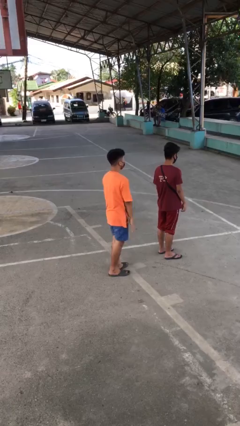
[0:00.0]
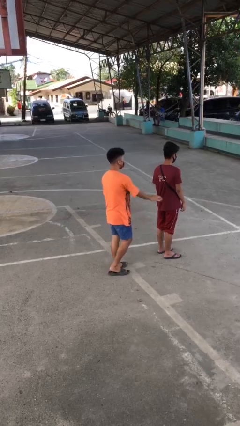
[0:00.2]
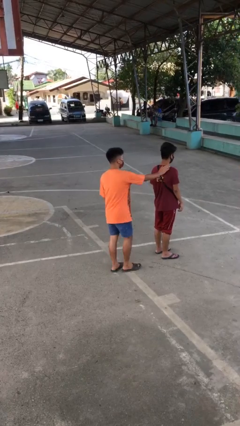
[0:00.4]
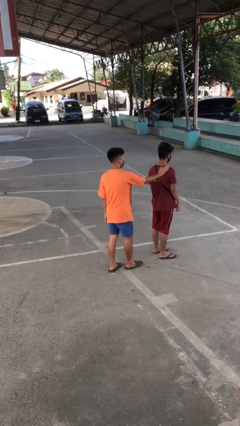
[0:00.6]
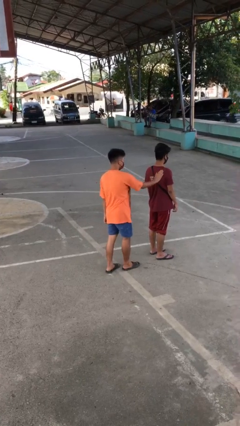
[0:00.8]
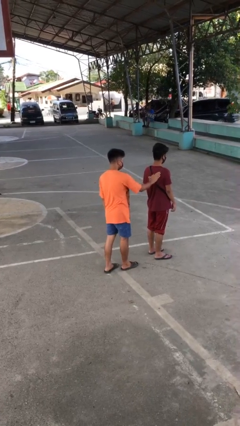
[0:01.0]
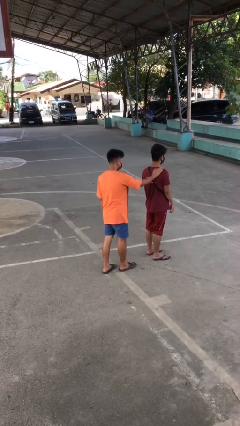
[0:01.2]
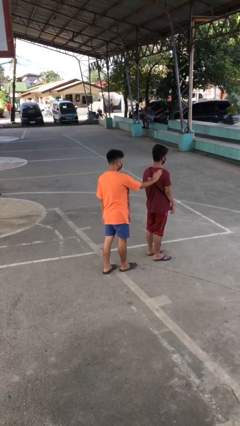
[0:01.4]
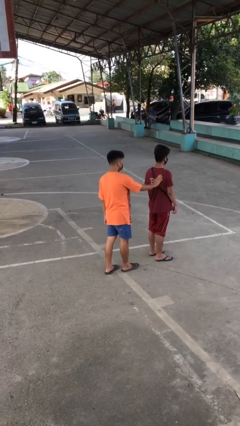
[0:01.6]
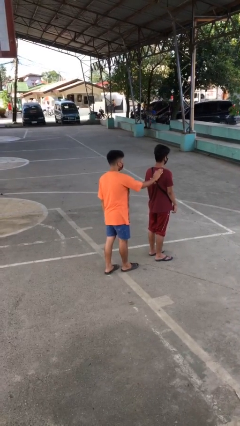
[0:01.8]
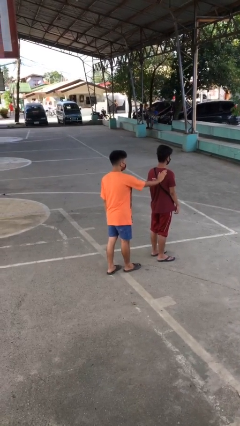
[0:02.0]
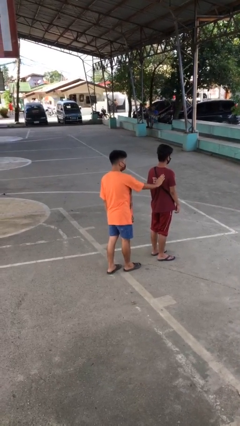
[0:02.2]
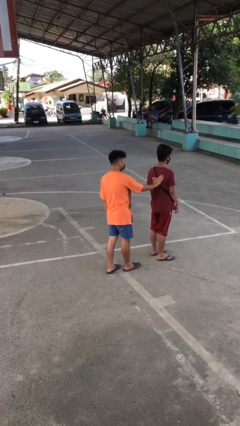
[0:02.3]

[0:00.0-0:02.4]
person touches back of person

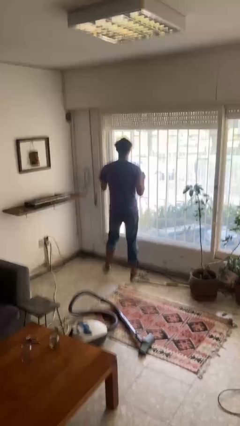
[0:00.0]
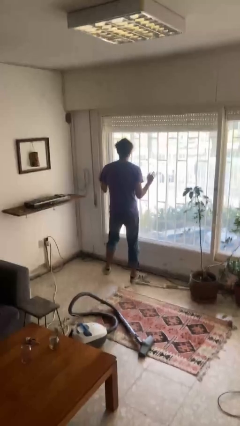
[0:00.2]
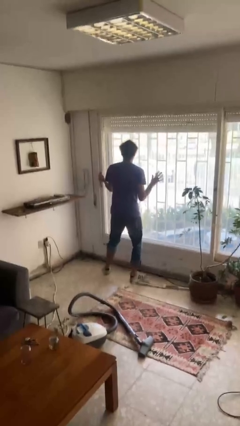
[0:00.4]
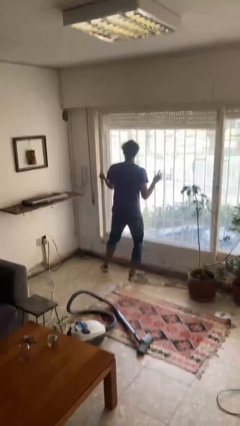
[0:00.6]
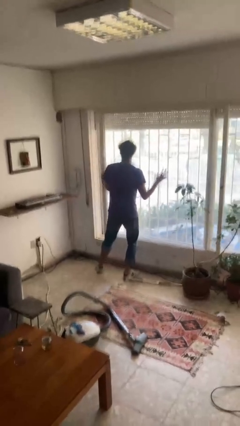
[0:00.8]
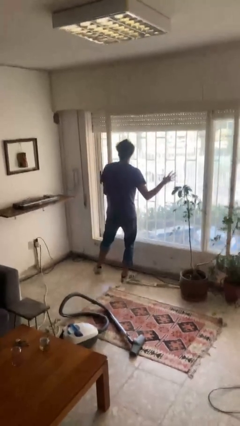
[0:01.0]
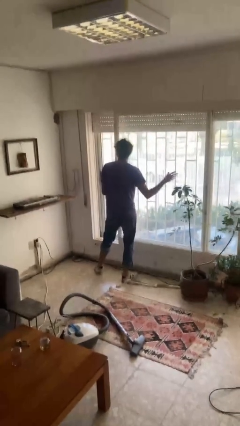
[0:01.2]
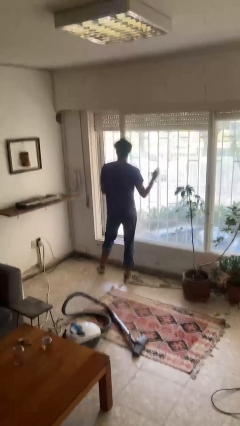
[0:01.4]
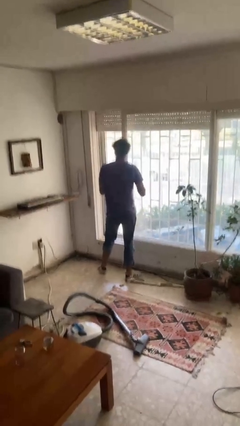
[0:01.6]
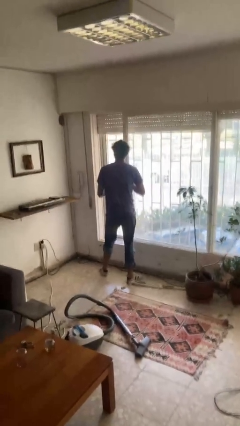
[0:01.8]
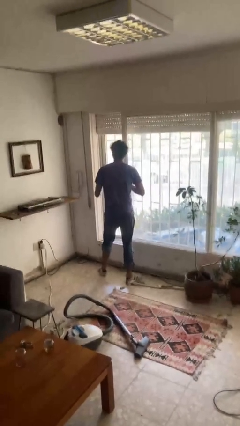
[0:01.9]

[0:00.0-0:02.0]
person opens sliding door

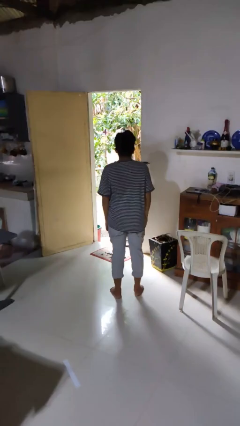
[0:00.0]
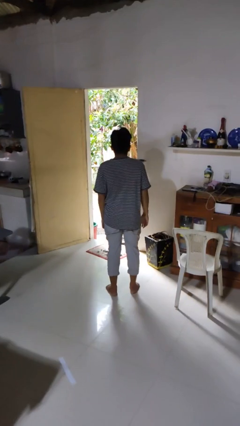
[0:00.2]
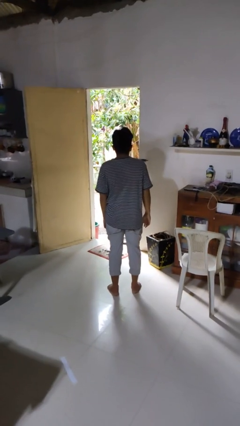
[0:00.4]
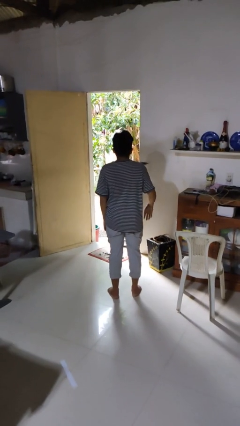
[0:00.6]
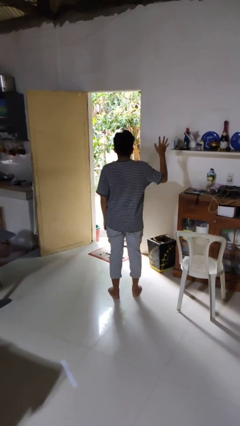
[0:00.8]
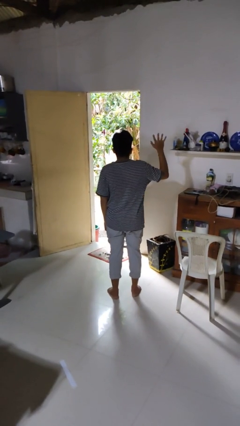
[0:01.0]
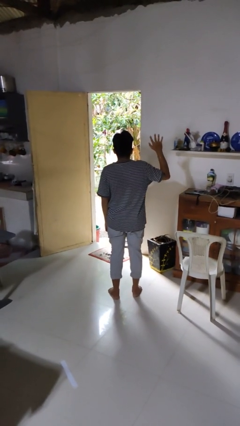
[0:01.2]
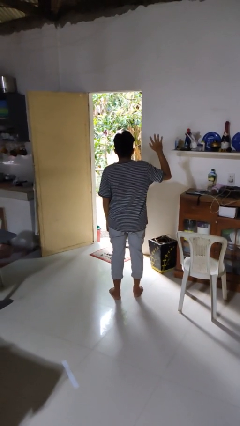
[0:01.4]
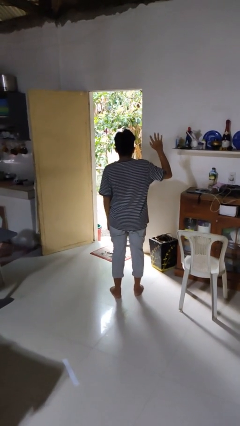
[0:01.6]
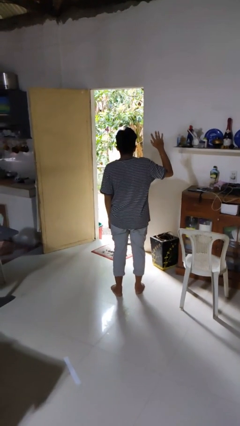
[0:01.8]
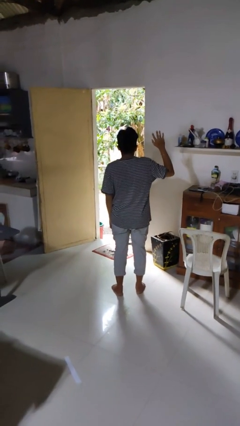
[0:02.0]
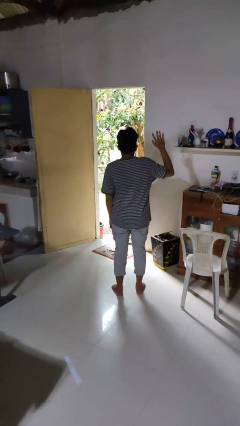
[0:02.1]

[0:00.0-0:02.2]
person gestures number five

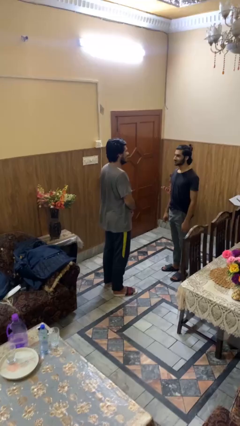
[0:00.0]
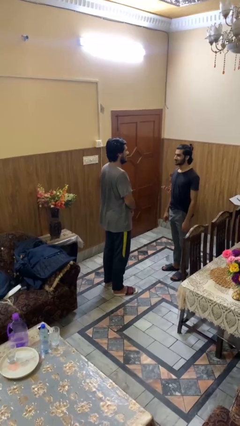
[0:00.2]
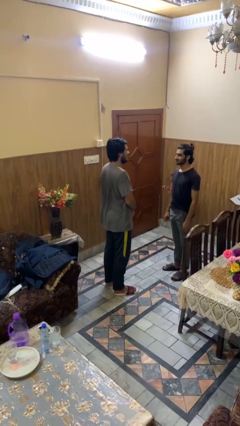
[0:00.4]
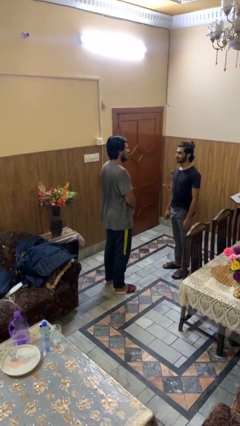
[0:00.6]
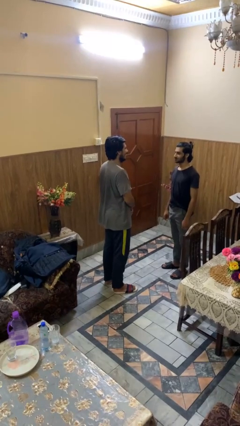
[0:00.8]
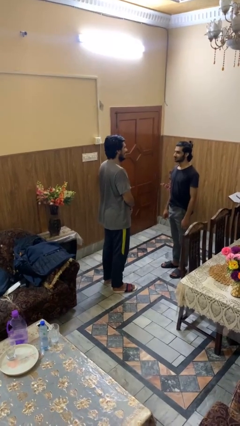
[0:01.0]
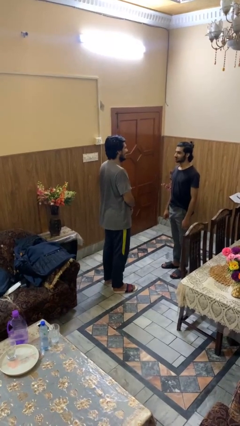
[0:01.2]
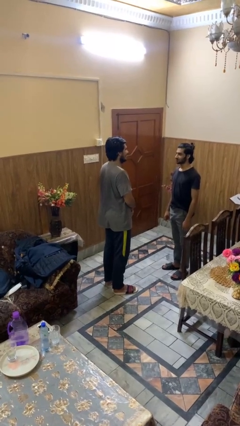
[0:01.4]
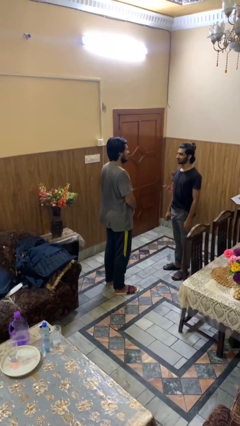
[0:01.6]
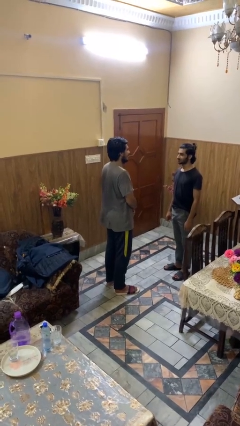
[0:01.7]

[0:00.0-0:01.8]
person laughs with person

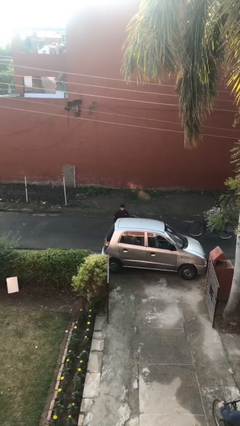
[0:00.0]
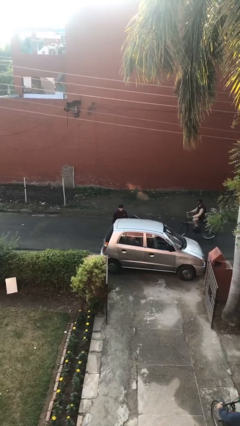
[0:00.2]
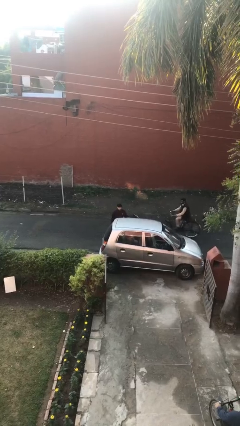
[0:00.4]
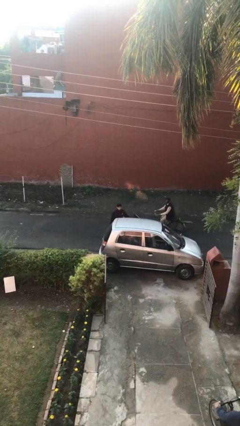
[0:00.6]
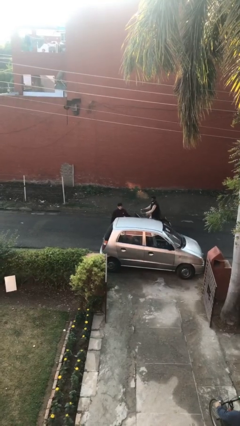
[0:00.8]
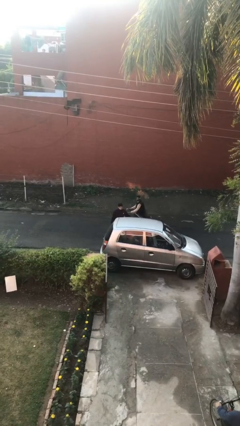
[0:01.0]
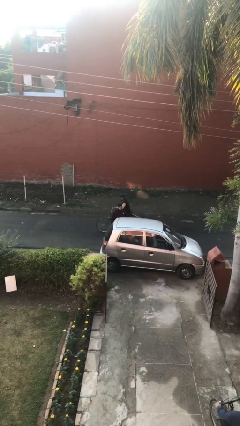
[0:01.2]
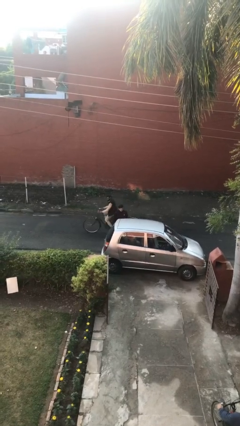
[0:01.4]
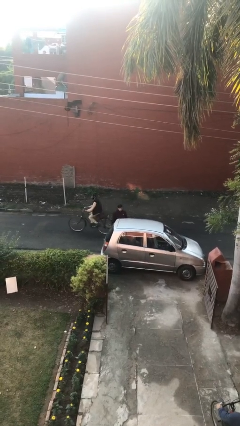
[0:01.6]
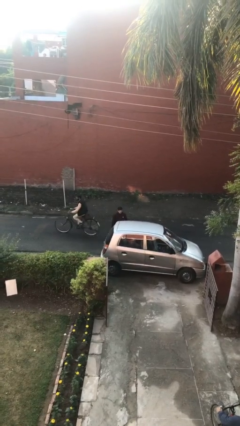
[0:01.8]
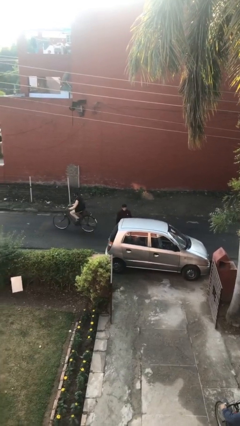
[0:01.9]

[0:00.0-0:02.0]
person closes car door

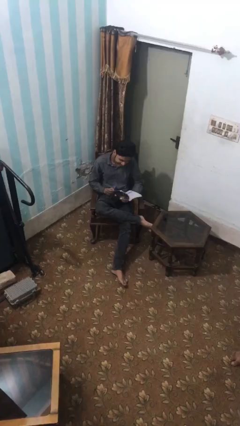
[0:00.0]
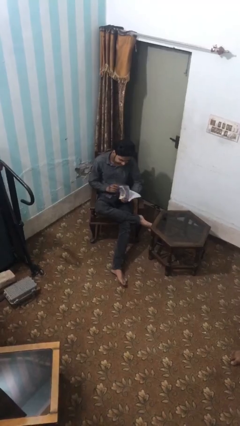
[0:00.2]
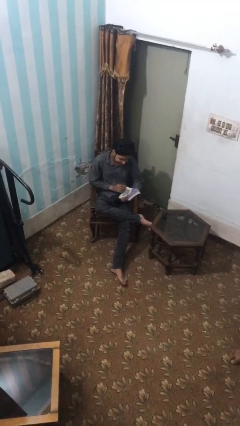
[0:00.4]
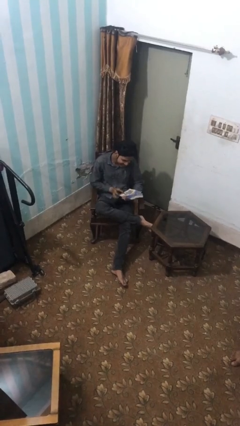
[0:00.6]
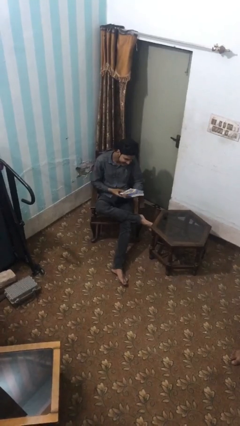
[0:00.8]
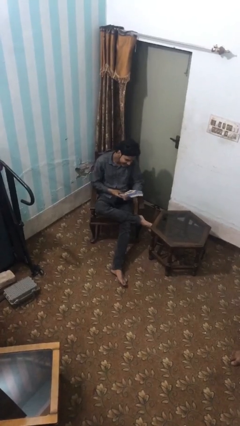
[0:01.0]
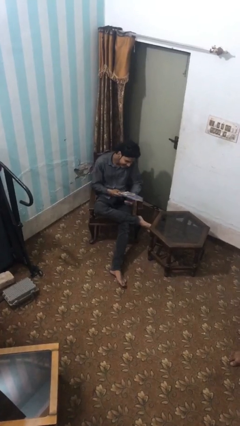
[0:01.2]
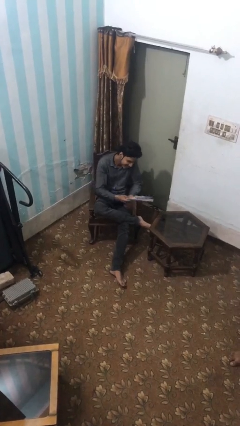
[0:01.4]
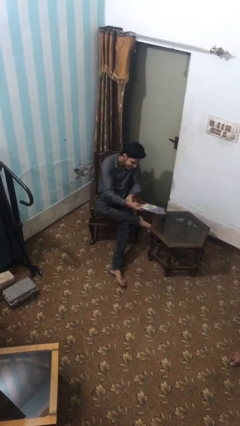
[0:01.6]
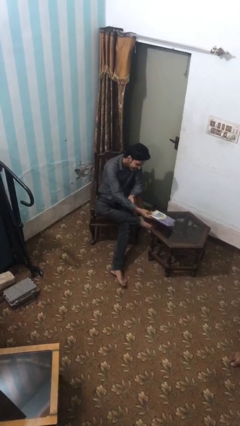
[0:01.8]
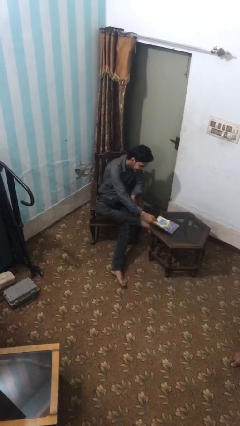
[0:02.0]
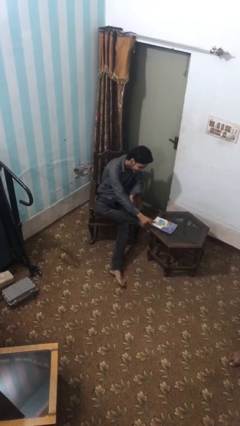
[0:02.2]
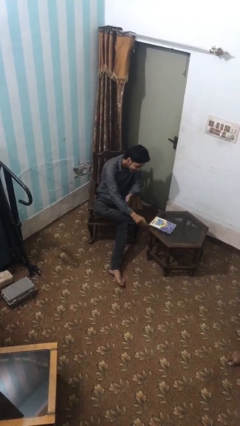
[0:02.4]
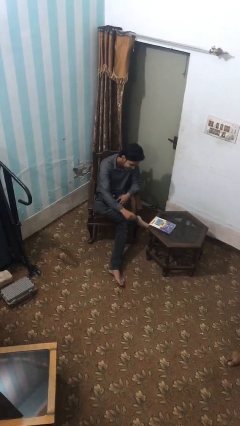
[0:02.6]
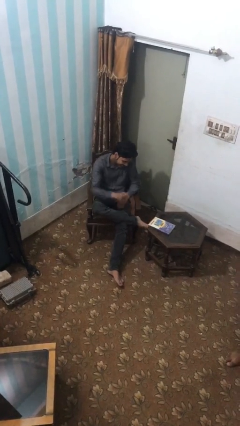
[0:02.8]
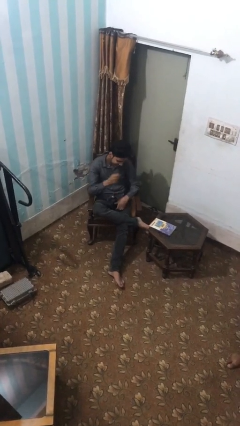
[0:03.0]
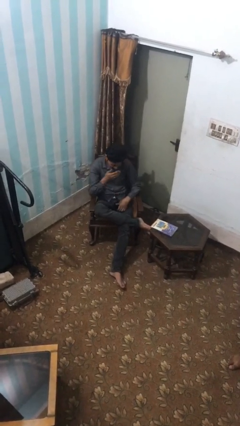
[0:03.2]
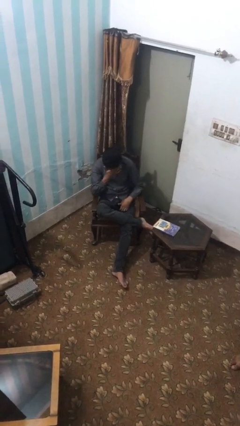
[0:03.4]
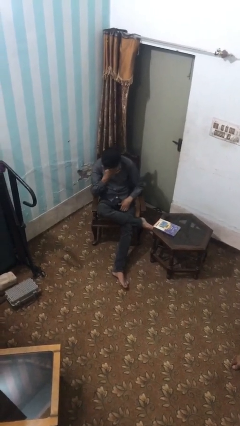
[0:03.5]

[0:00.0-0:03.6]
person puts down object on table

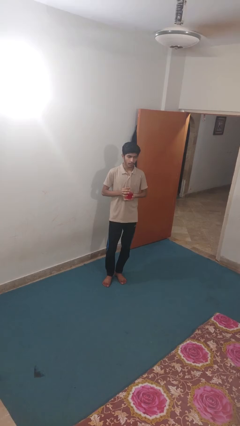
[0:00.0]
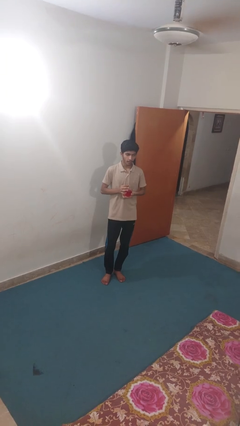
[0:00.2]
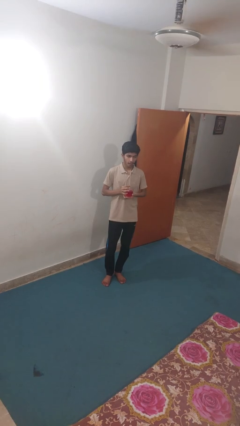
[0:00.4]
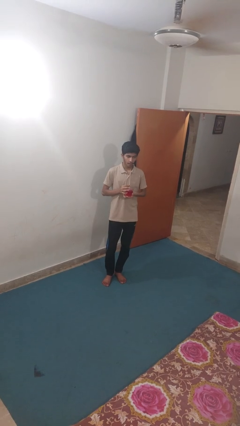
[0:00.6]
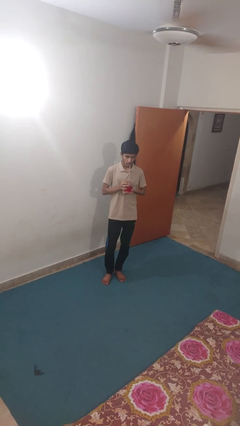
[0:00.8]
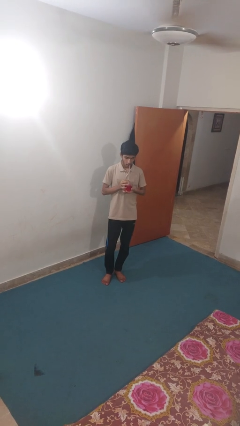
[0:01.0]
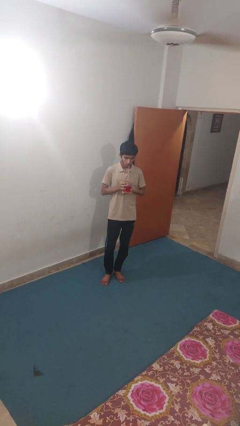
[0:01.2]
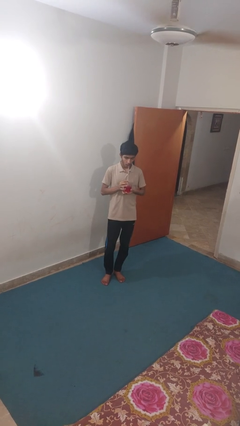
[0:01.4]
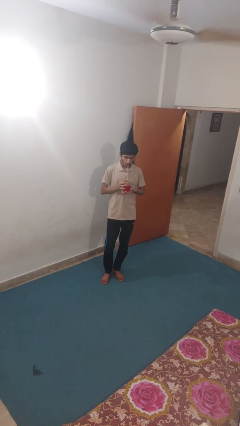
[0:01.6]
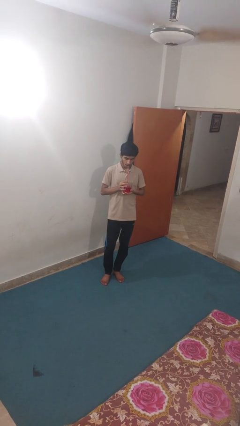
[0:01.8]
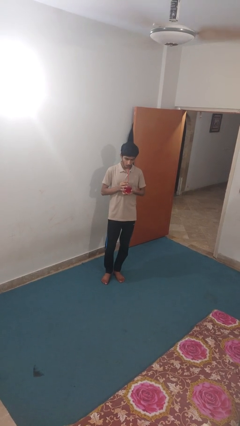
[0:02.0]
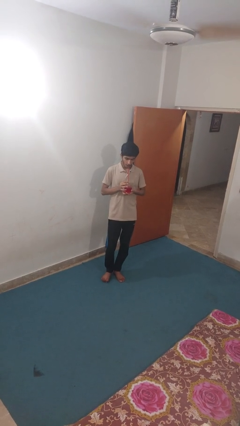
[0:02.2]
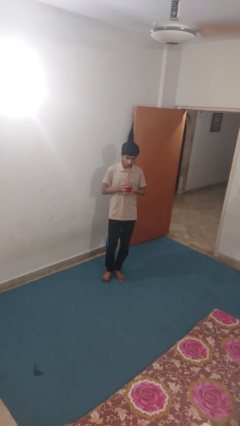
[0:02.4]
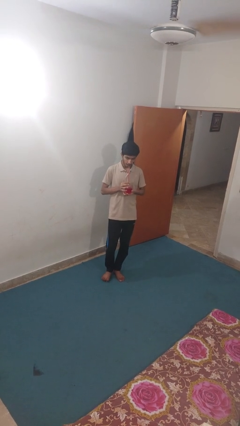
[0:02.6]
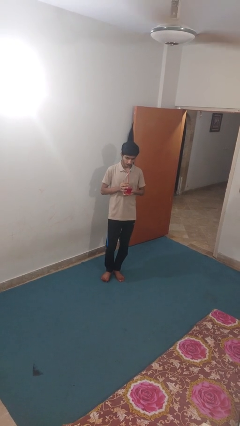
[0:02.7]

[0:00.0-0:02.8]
person drinks from straw

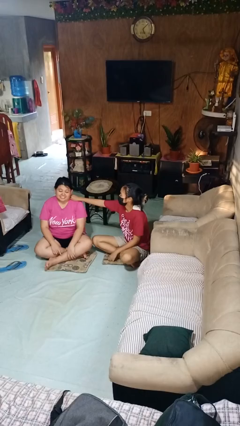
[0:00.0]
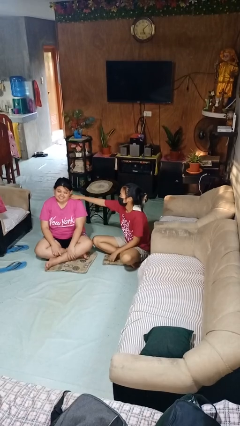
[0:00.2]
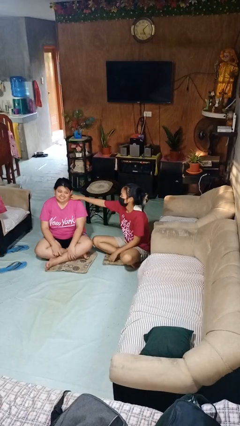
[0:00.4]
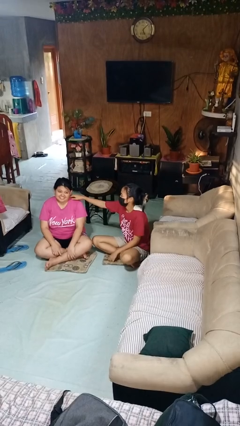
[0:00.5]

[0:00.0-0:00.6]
person tickles person
